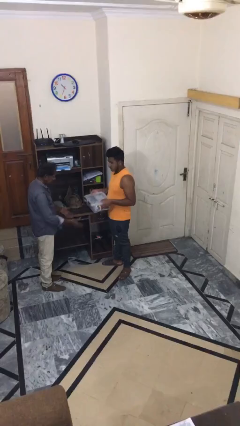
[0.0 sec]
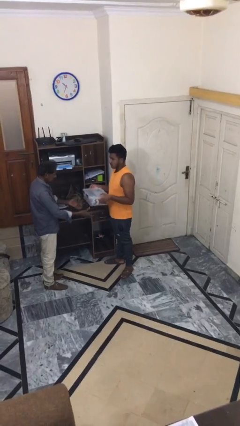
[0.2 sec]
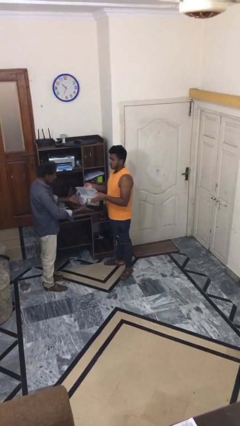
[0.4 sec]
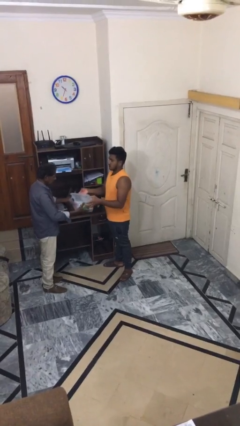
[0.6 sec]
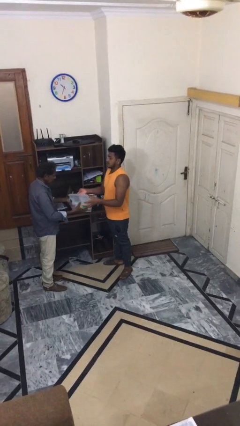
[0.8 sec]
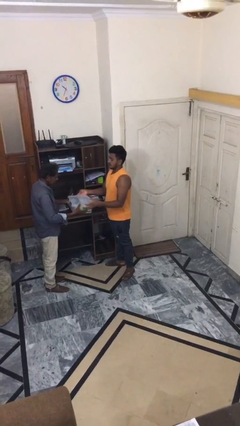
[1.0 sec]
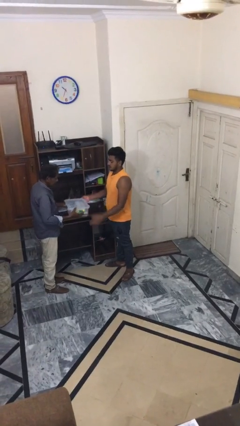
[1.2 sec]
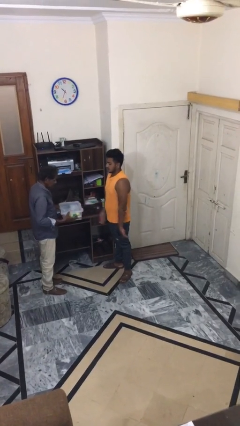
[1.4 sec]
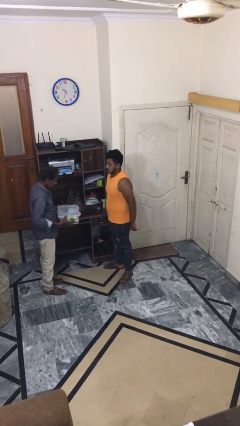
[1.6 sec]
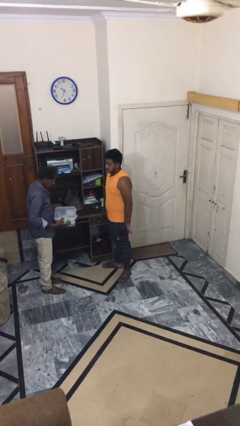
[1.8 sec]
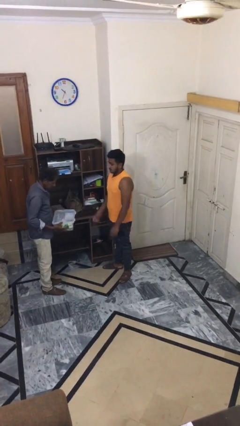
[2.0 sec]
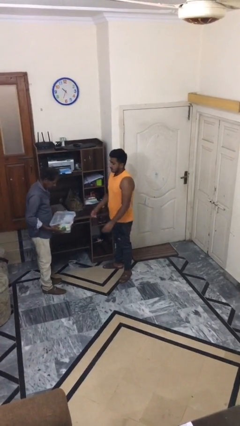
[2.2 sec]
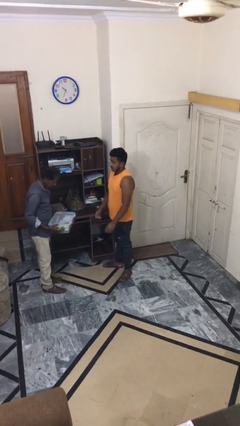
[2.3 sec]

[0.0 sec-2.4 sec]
person transfers object to person

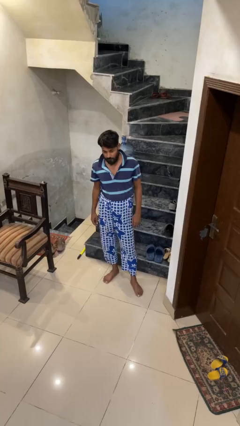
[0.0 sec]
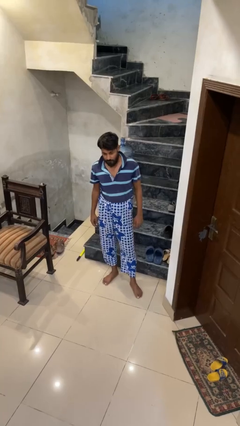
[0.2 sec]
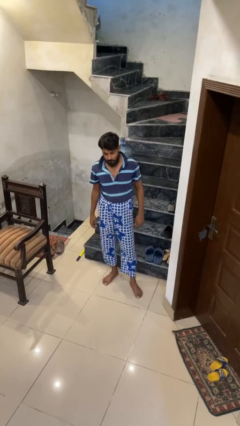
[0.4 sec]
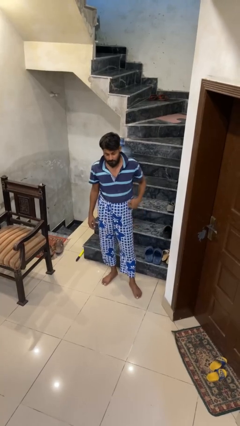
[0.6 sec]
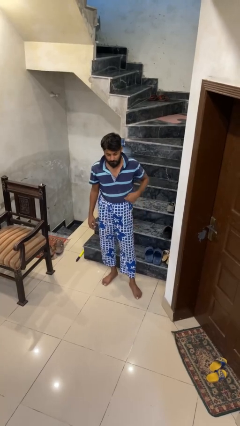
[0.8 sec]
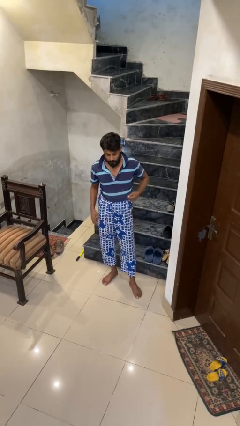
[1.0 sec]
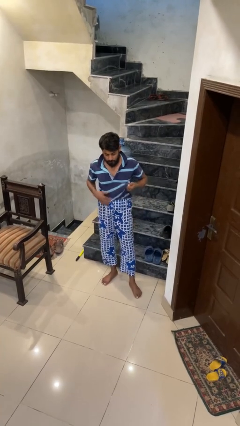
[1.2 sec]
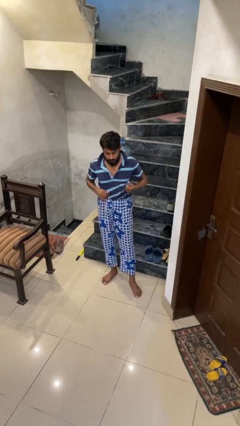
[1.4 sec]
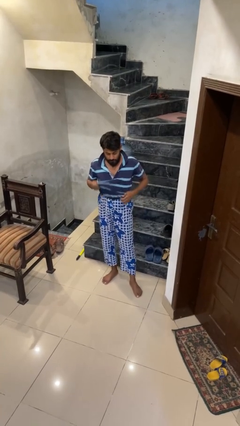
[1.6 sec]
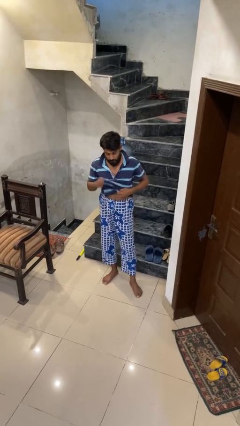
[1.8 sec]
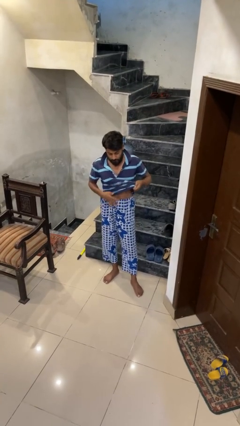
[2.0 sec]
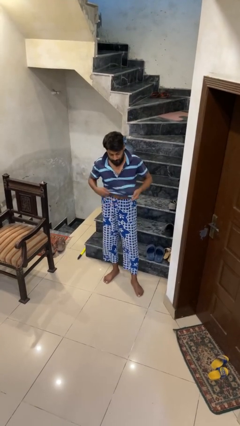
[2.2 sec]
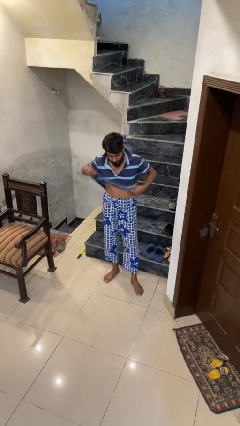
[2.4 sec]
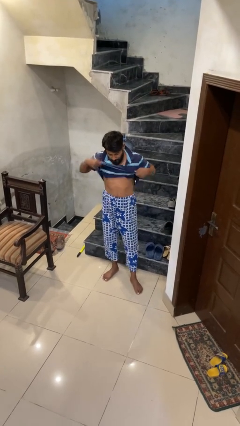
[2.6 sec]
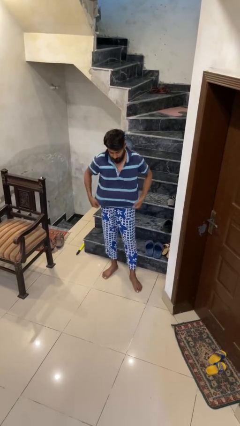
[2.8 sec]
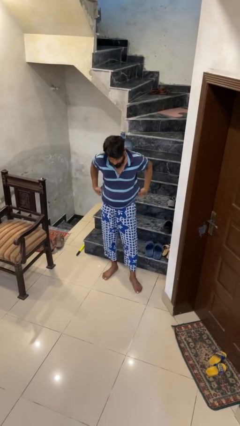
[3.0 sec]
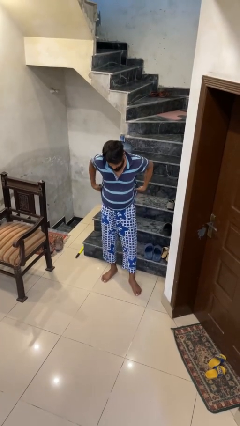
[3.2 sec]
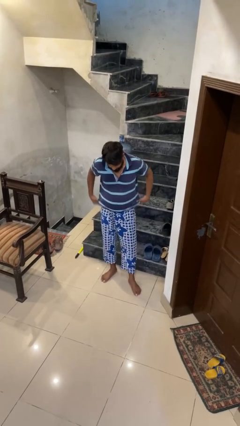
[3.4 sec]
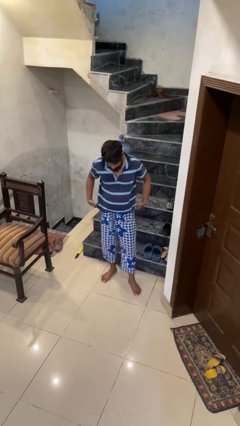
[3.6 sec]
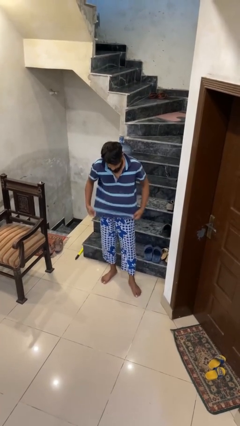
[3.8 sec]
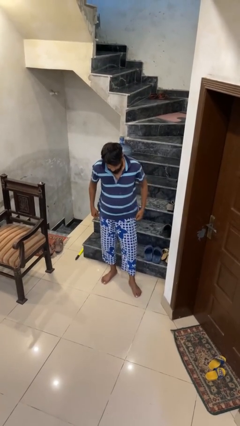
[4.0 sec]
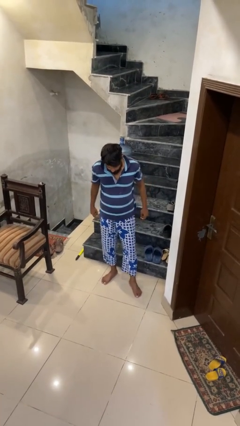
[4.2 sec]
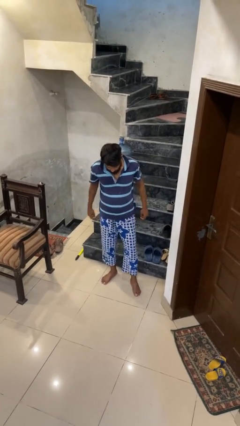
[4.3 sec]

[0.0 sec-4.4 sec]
person untucks shirt

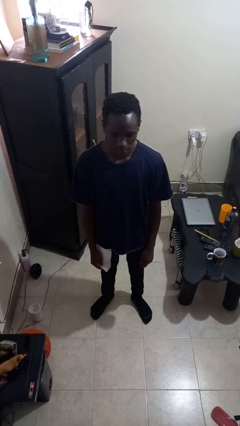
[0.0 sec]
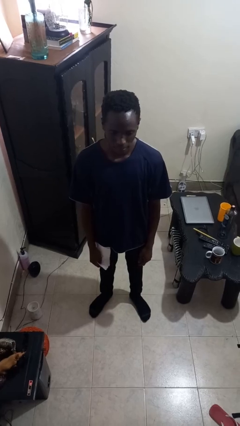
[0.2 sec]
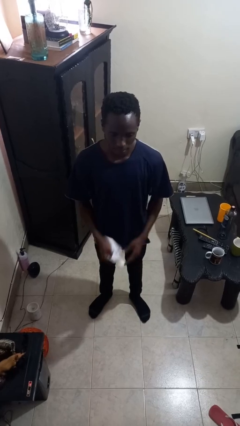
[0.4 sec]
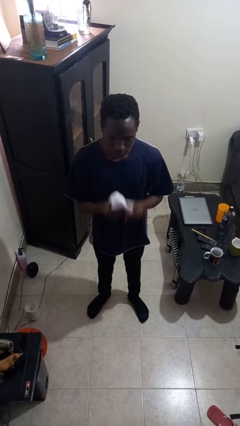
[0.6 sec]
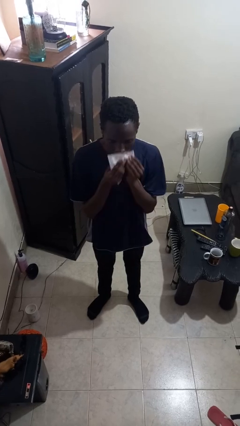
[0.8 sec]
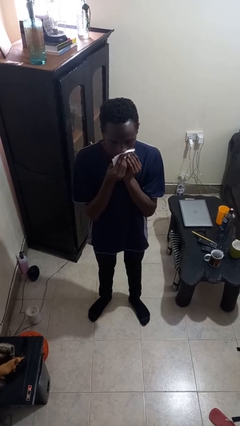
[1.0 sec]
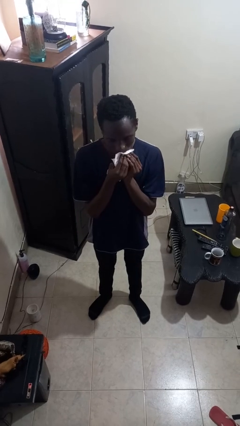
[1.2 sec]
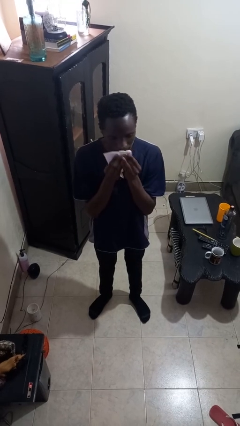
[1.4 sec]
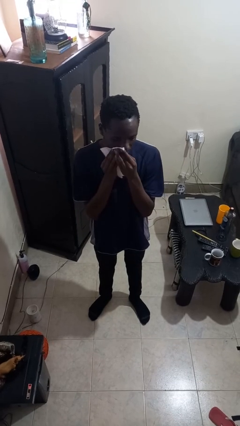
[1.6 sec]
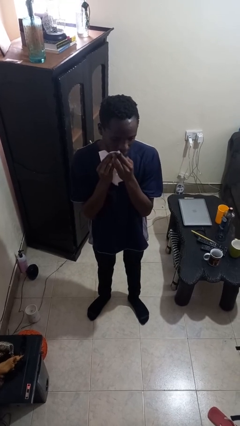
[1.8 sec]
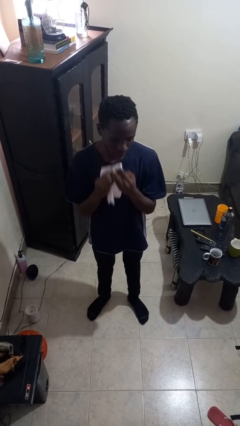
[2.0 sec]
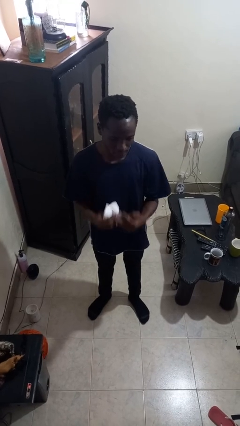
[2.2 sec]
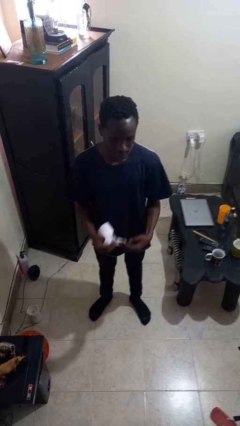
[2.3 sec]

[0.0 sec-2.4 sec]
person wipes mouth with napkin

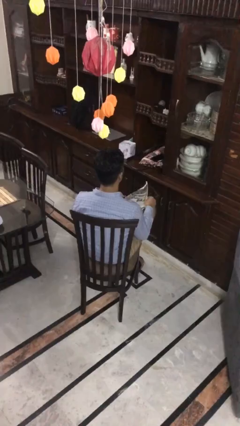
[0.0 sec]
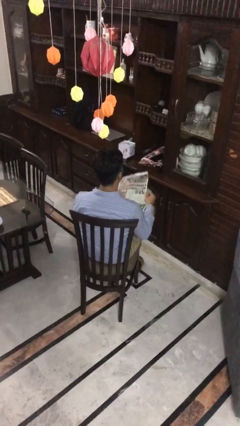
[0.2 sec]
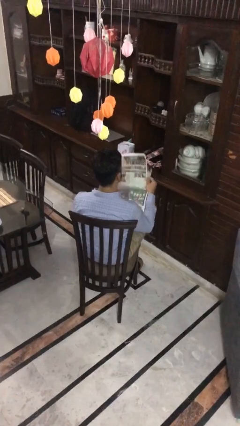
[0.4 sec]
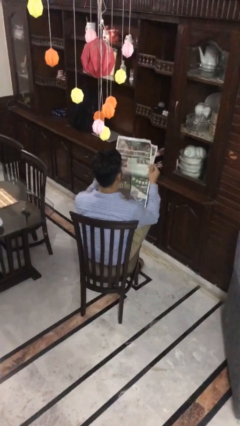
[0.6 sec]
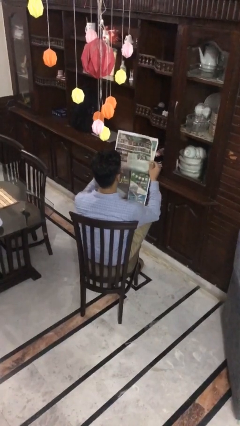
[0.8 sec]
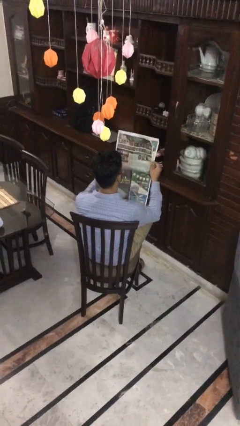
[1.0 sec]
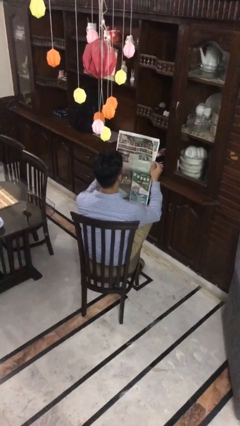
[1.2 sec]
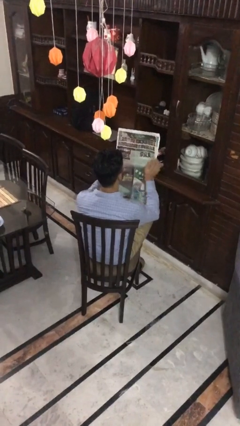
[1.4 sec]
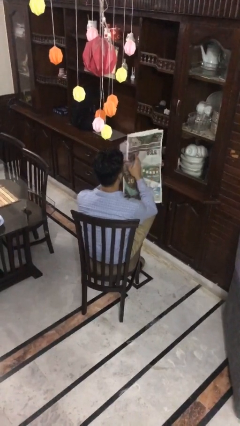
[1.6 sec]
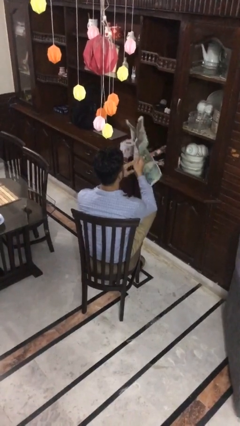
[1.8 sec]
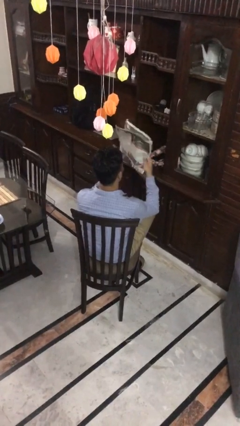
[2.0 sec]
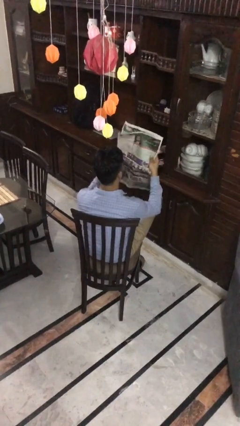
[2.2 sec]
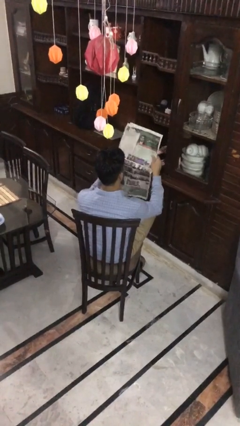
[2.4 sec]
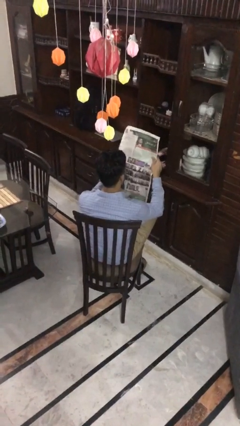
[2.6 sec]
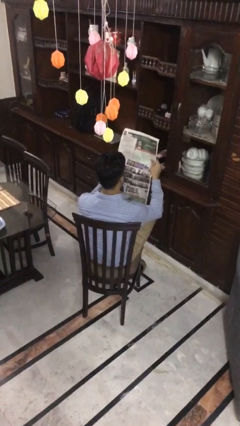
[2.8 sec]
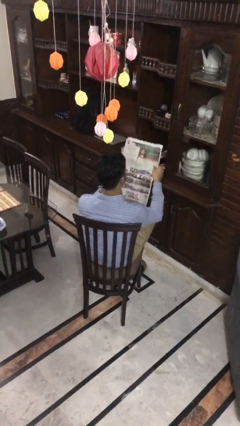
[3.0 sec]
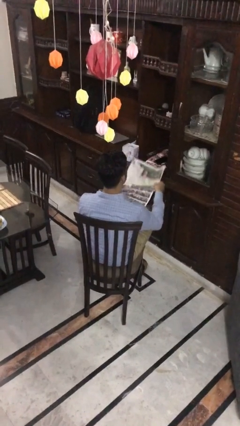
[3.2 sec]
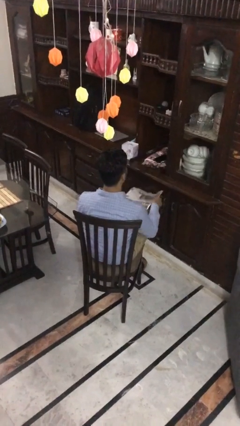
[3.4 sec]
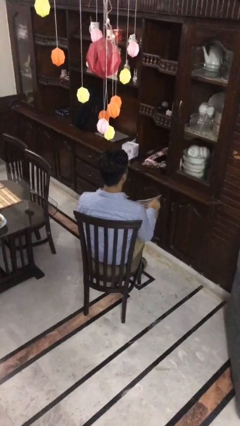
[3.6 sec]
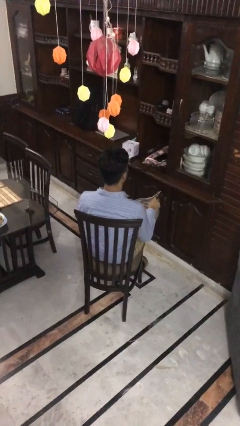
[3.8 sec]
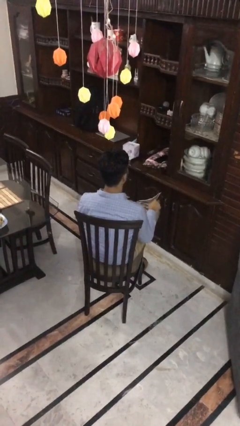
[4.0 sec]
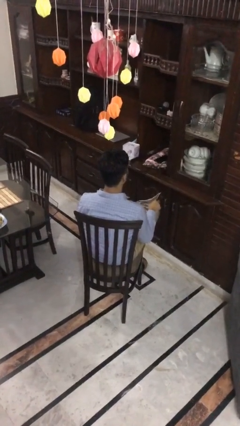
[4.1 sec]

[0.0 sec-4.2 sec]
person reads newspaper

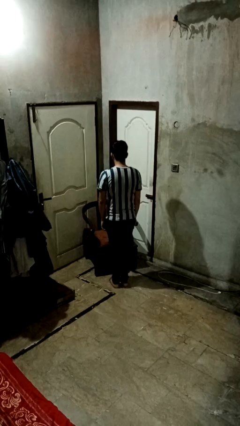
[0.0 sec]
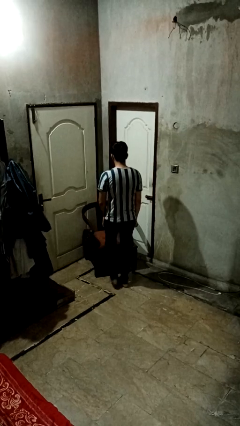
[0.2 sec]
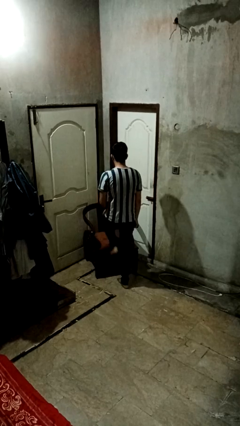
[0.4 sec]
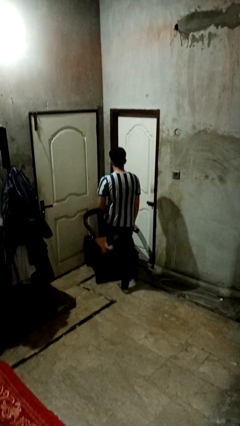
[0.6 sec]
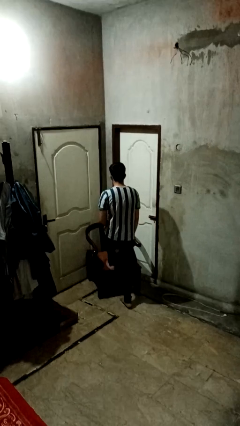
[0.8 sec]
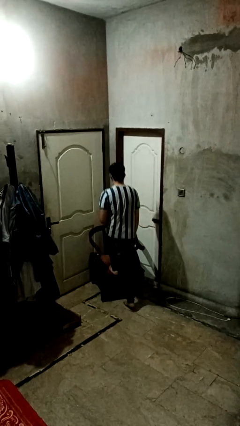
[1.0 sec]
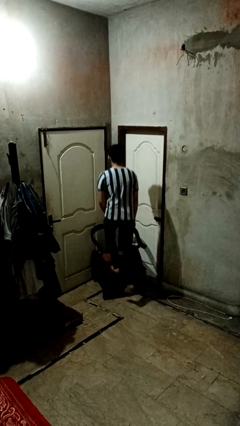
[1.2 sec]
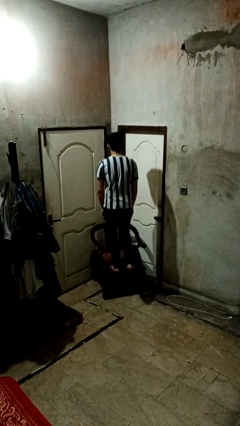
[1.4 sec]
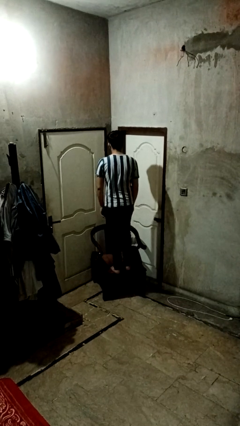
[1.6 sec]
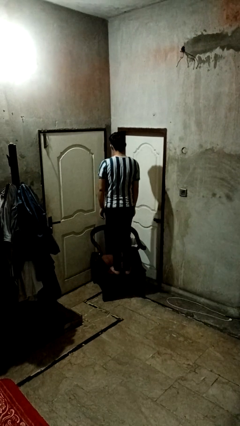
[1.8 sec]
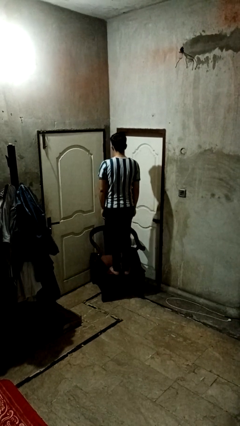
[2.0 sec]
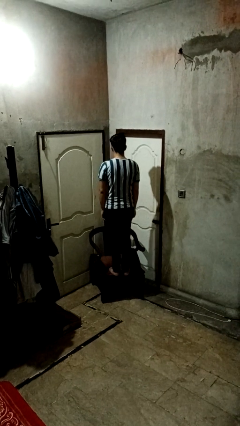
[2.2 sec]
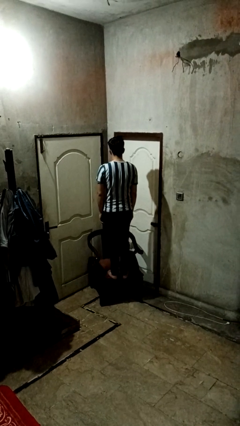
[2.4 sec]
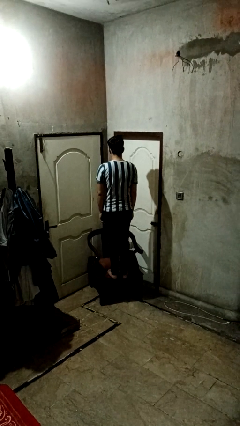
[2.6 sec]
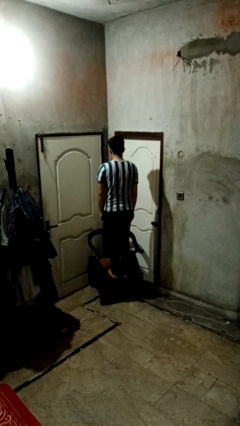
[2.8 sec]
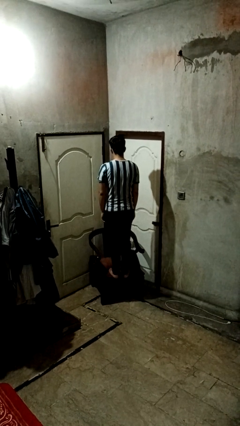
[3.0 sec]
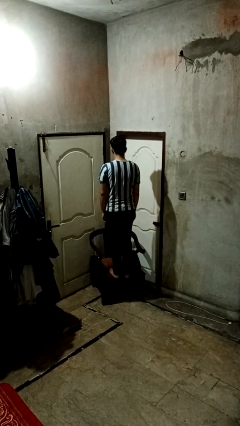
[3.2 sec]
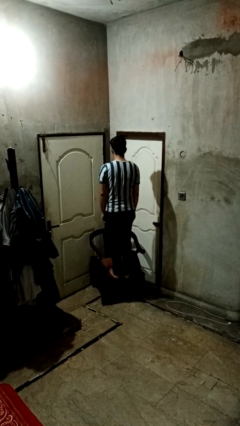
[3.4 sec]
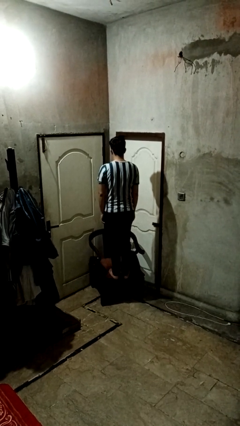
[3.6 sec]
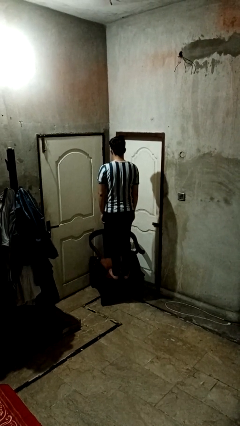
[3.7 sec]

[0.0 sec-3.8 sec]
person climbs on couch

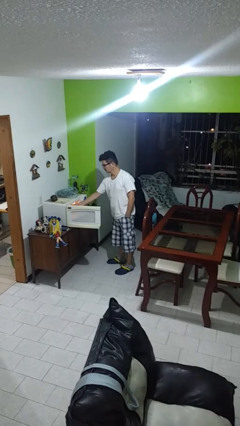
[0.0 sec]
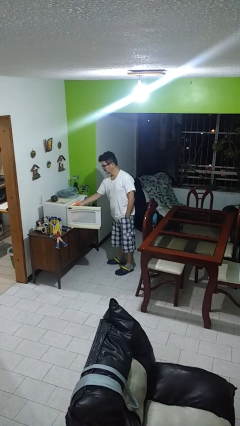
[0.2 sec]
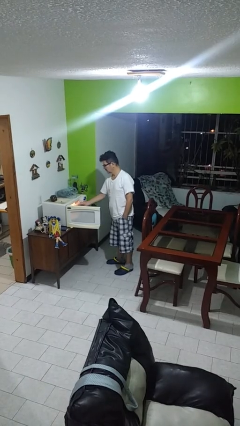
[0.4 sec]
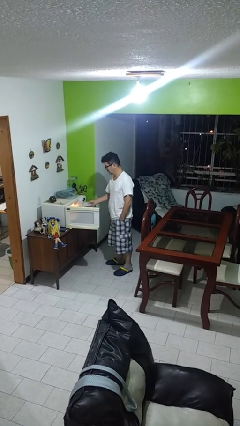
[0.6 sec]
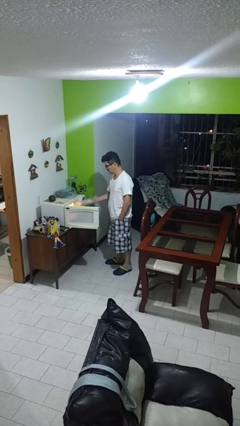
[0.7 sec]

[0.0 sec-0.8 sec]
person takes object from microwave
